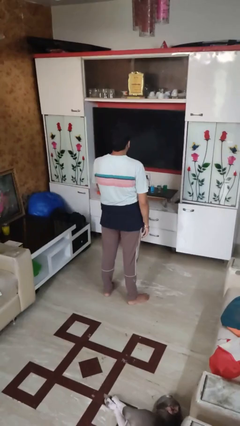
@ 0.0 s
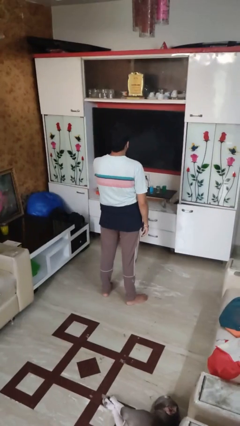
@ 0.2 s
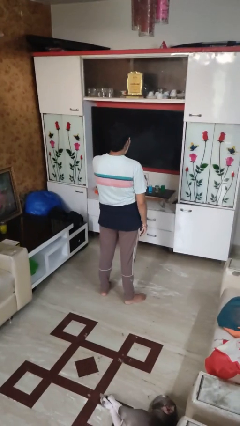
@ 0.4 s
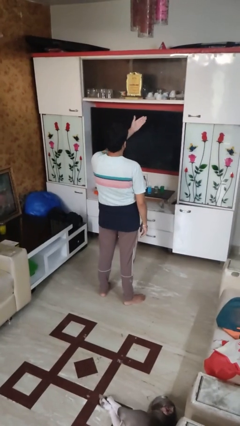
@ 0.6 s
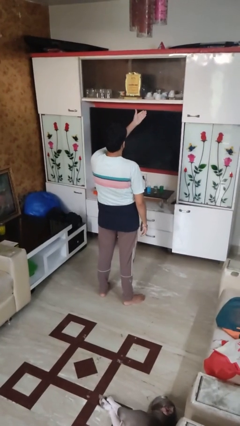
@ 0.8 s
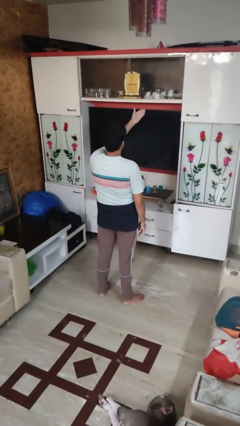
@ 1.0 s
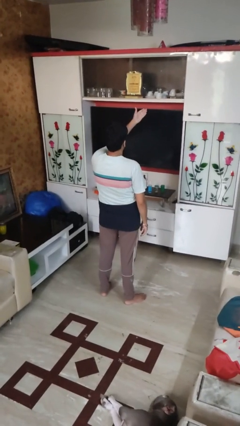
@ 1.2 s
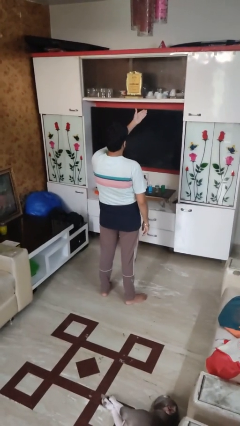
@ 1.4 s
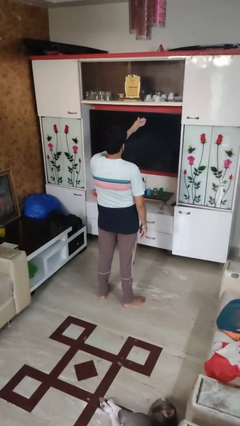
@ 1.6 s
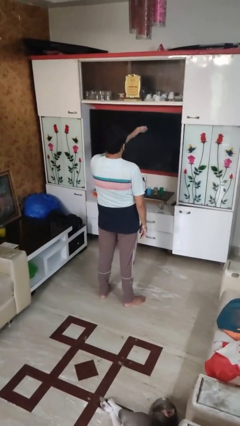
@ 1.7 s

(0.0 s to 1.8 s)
person gestures blow kiss

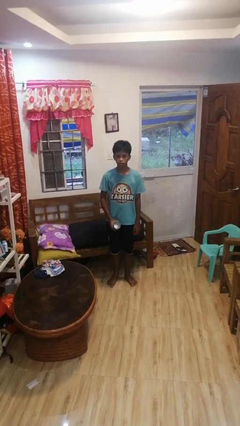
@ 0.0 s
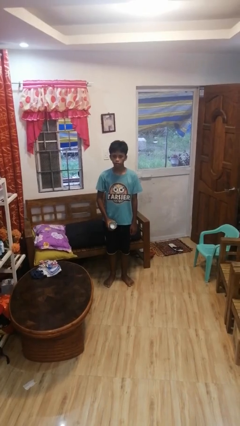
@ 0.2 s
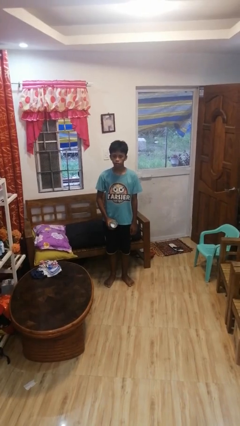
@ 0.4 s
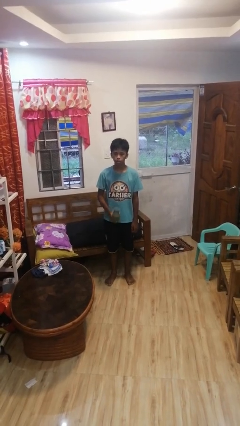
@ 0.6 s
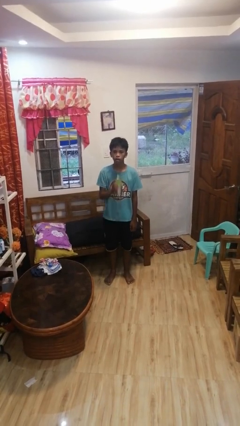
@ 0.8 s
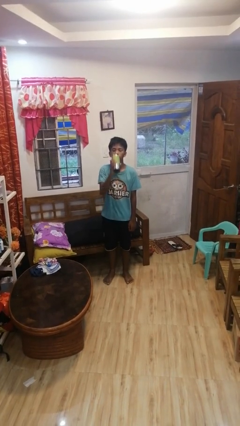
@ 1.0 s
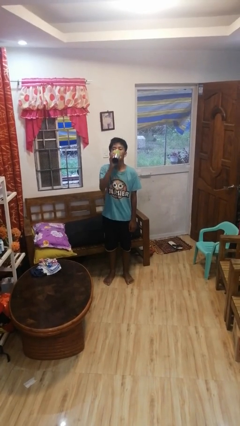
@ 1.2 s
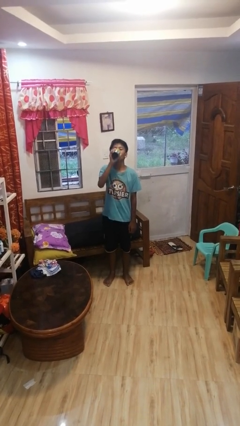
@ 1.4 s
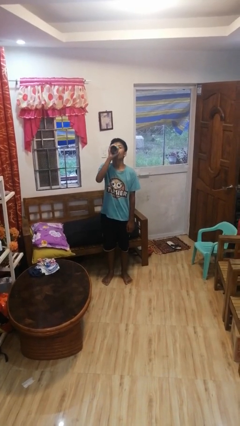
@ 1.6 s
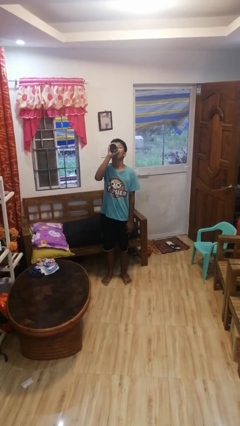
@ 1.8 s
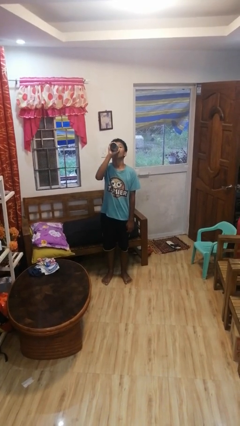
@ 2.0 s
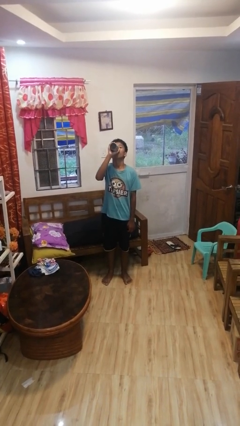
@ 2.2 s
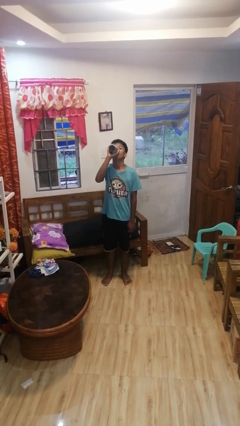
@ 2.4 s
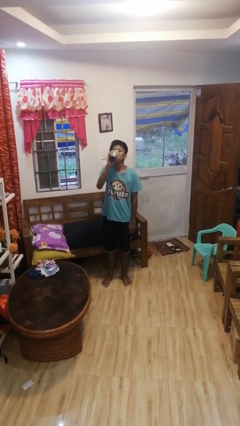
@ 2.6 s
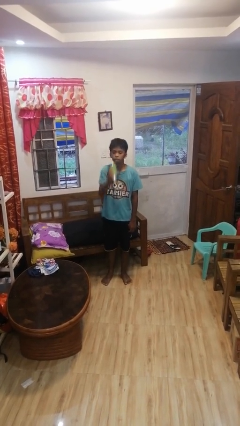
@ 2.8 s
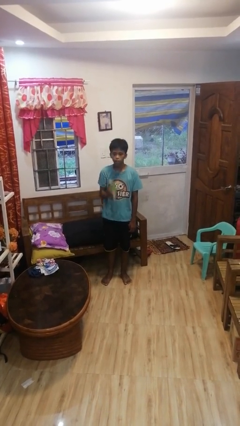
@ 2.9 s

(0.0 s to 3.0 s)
person drinks from bottle

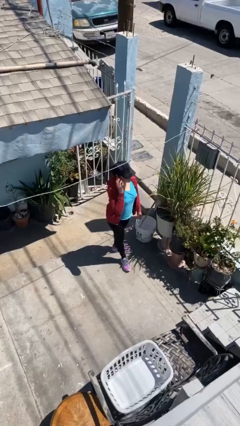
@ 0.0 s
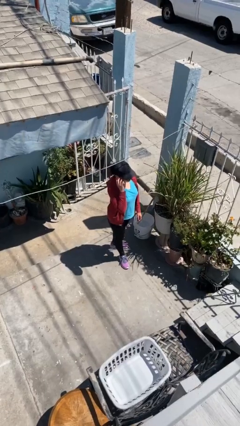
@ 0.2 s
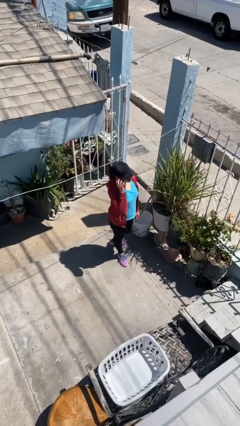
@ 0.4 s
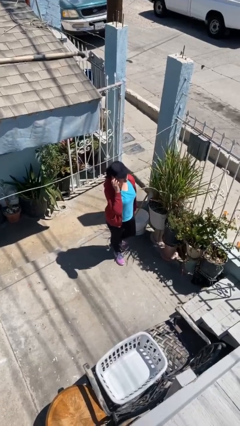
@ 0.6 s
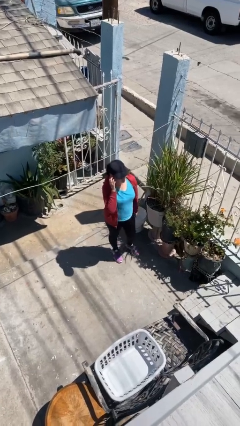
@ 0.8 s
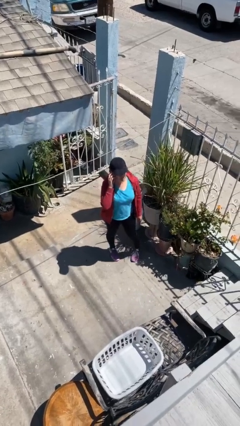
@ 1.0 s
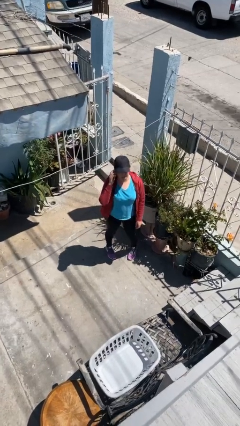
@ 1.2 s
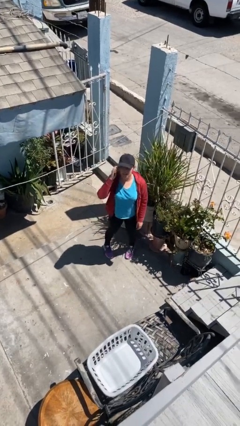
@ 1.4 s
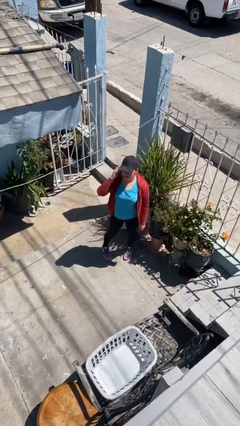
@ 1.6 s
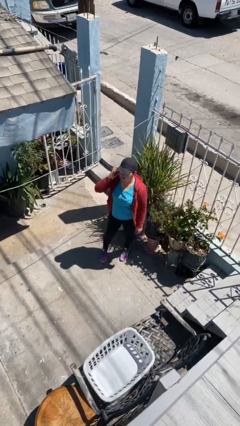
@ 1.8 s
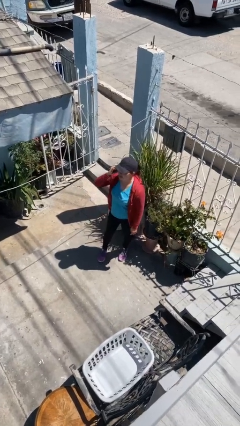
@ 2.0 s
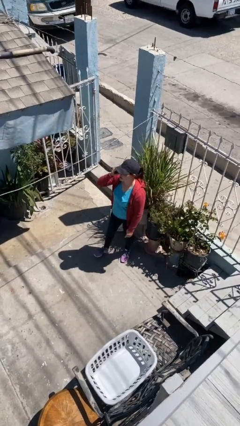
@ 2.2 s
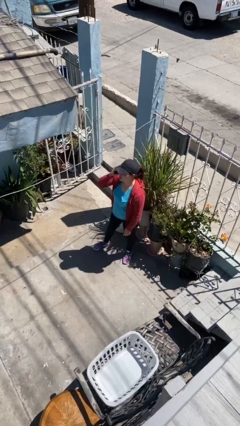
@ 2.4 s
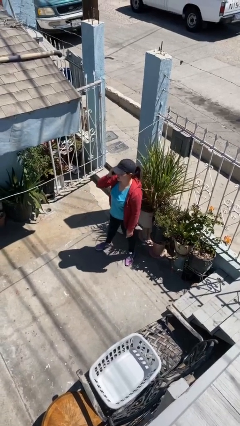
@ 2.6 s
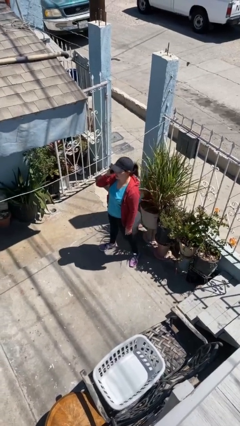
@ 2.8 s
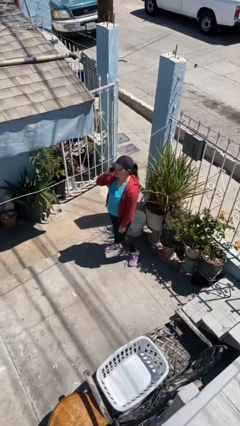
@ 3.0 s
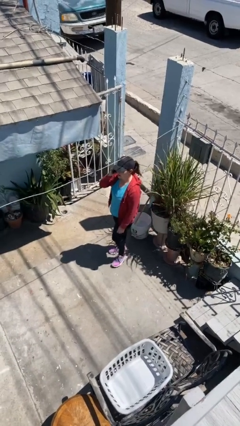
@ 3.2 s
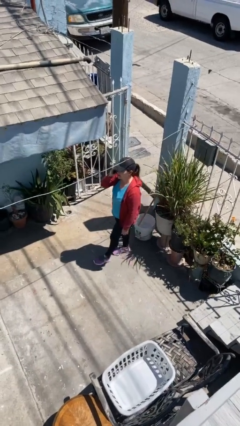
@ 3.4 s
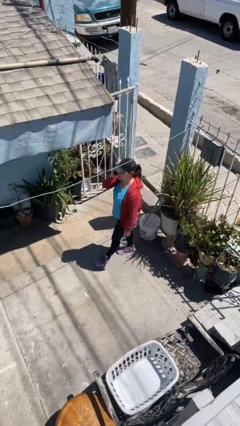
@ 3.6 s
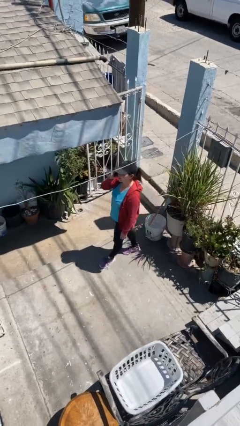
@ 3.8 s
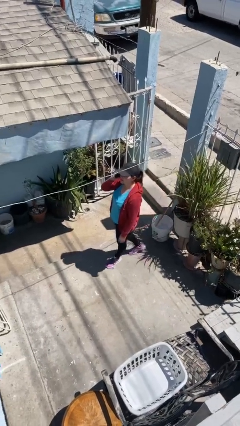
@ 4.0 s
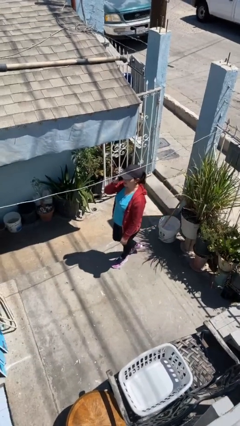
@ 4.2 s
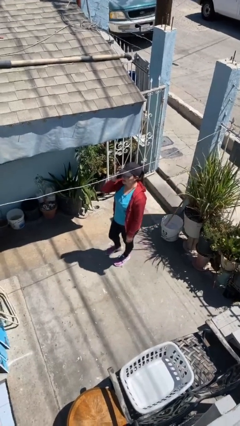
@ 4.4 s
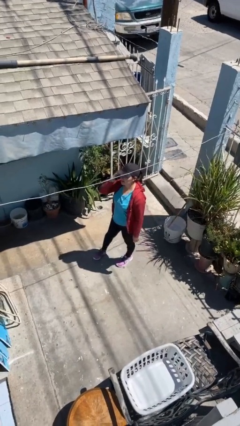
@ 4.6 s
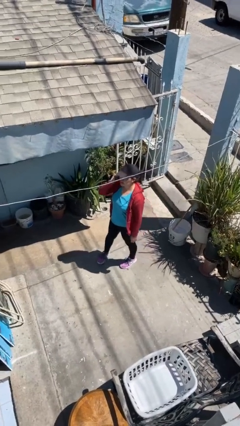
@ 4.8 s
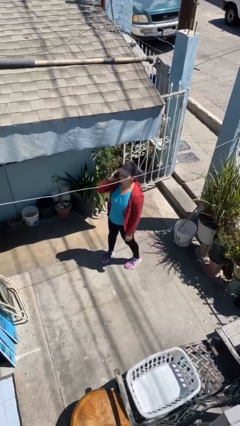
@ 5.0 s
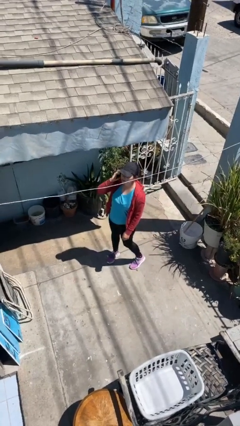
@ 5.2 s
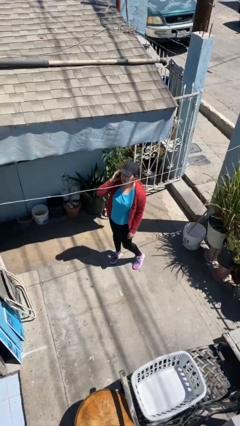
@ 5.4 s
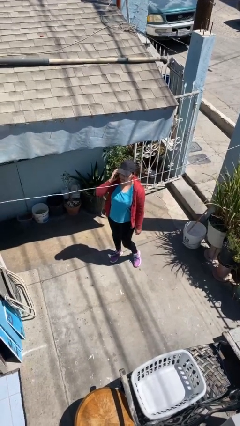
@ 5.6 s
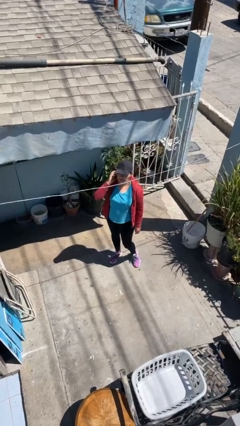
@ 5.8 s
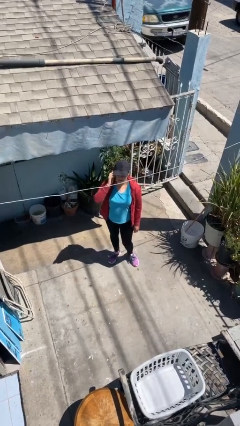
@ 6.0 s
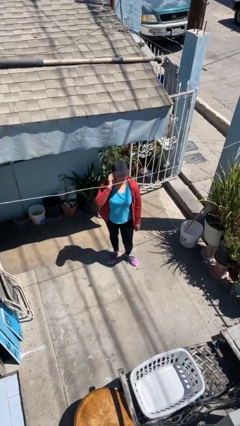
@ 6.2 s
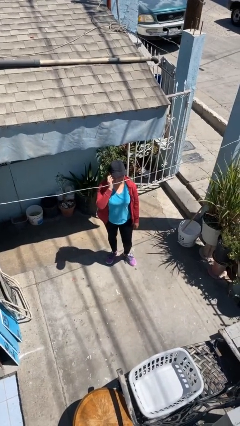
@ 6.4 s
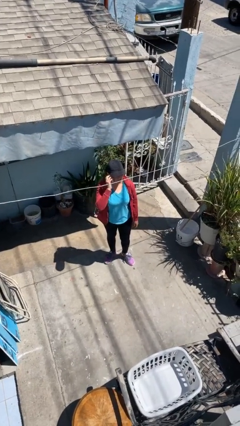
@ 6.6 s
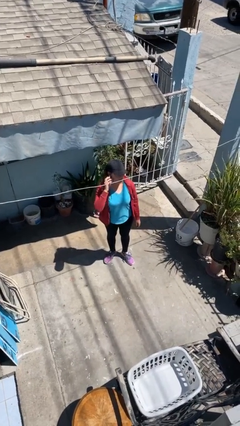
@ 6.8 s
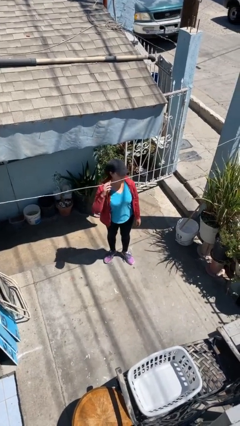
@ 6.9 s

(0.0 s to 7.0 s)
person talks on phone

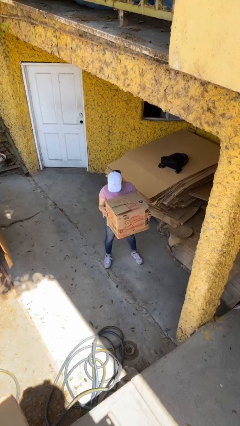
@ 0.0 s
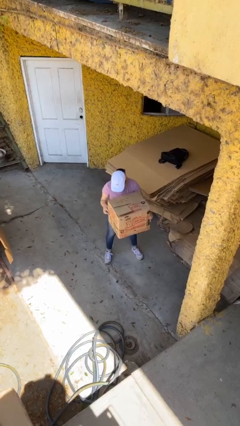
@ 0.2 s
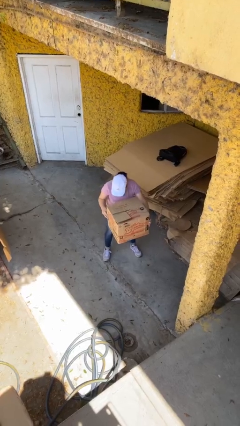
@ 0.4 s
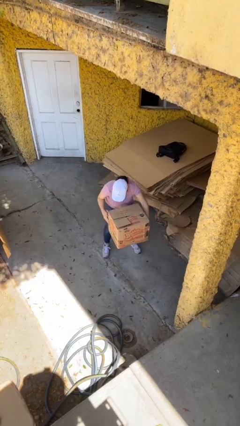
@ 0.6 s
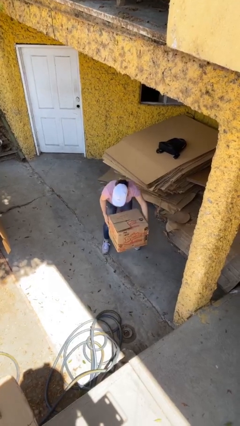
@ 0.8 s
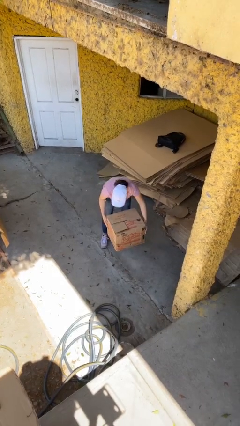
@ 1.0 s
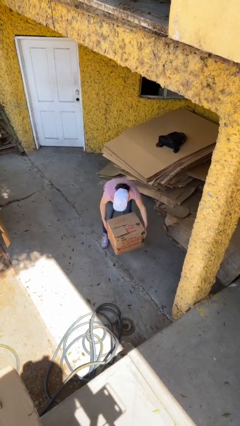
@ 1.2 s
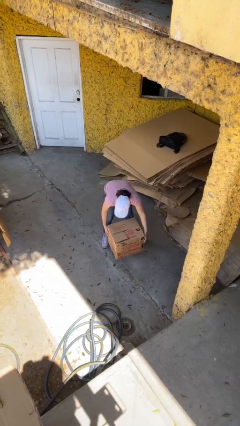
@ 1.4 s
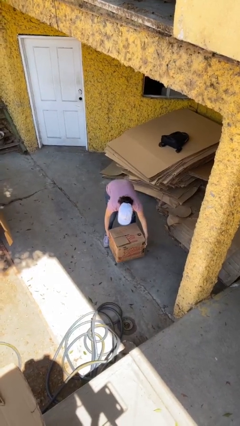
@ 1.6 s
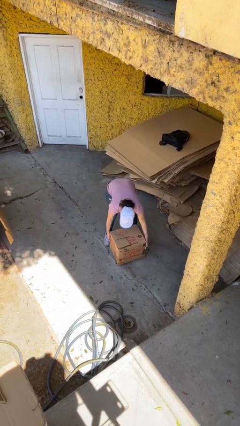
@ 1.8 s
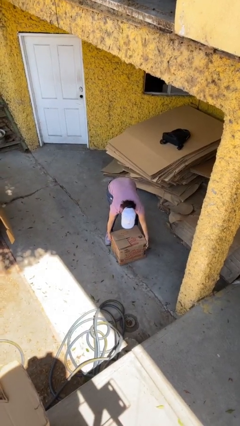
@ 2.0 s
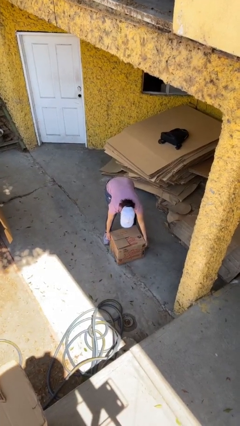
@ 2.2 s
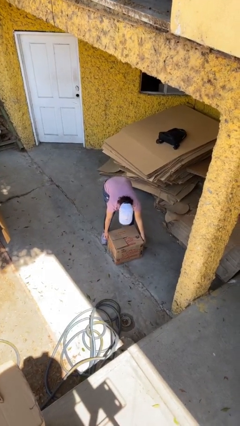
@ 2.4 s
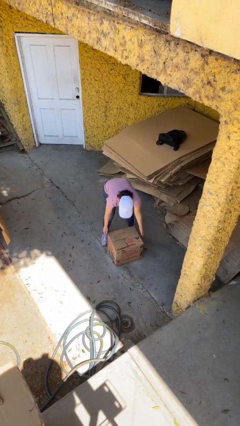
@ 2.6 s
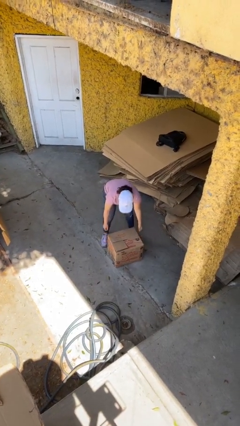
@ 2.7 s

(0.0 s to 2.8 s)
person puts down object on floor

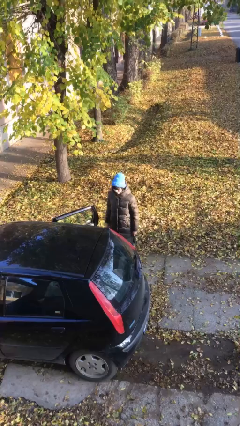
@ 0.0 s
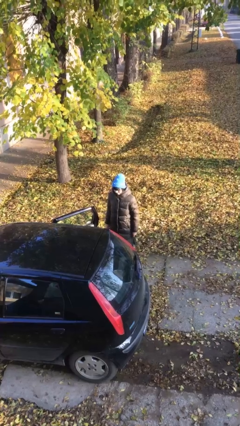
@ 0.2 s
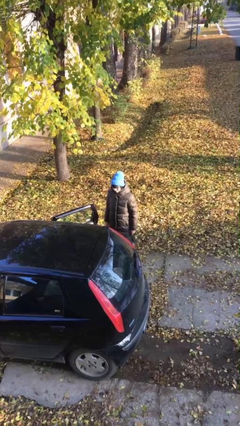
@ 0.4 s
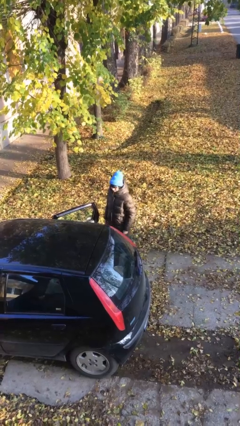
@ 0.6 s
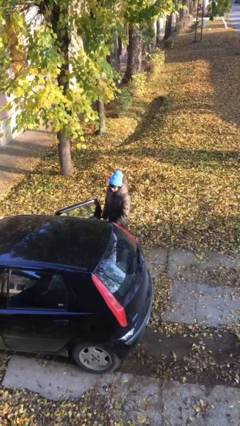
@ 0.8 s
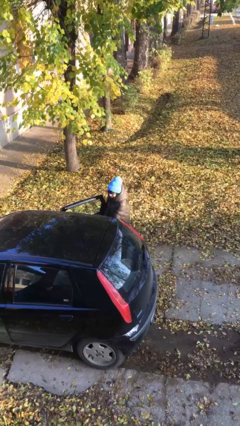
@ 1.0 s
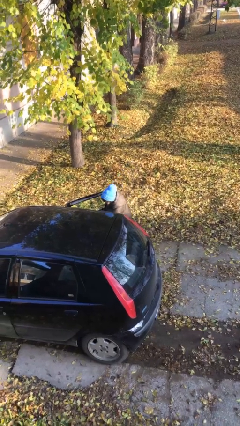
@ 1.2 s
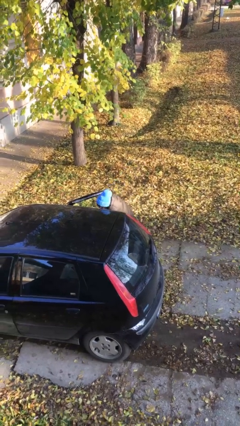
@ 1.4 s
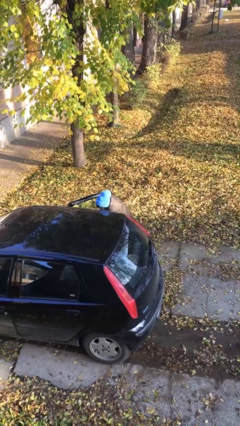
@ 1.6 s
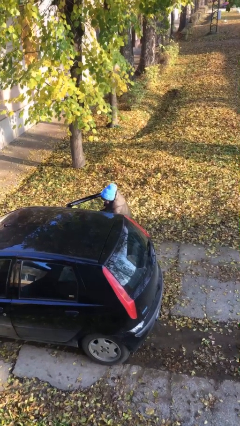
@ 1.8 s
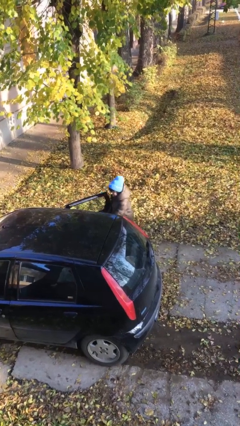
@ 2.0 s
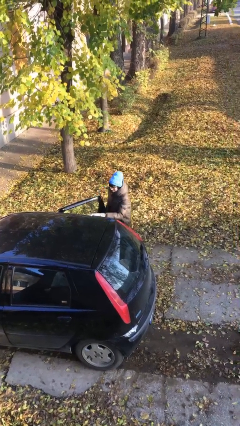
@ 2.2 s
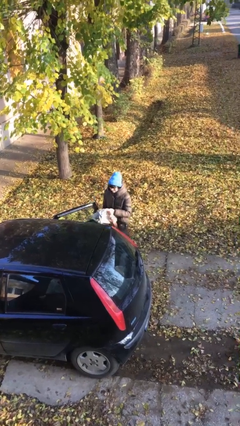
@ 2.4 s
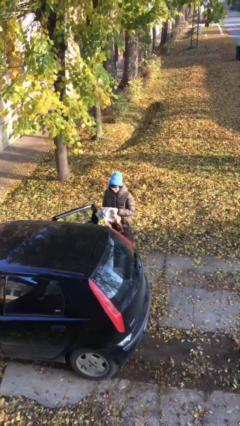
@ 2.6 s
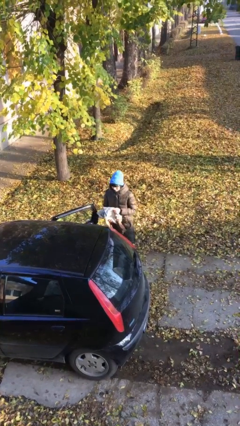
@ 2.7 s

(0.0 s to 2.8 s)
person unloads car
